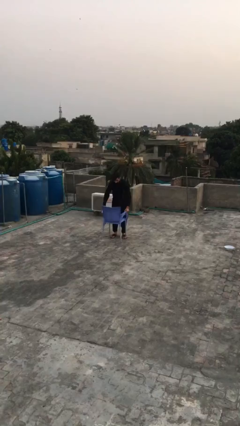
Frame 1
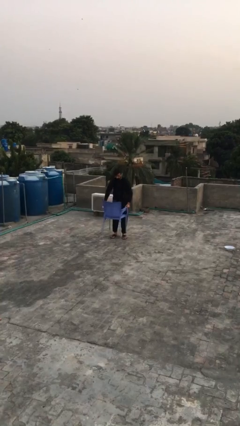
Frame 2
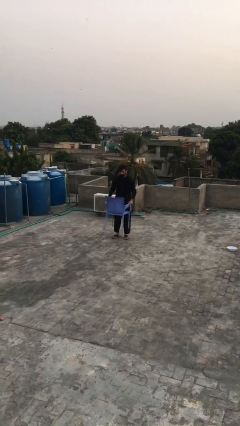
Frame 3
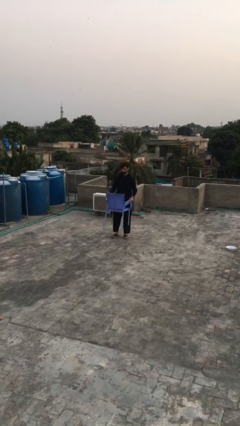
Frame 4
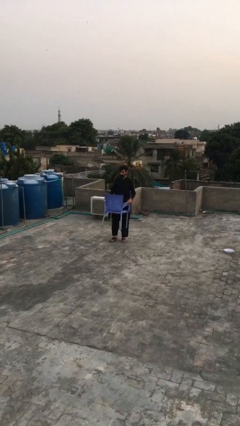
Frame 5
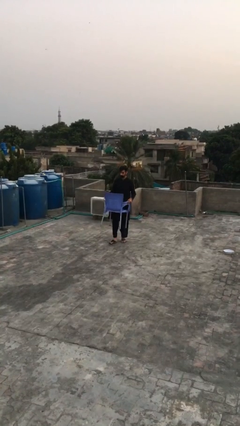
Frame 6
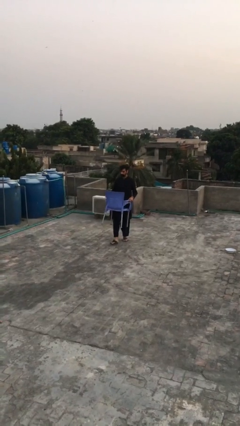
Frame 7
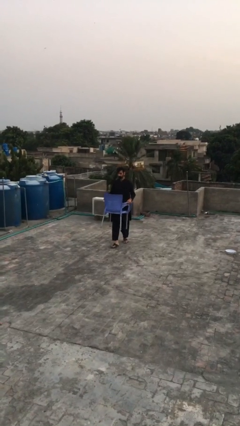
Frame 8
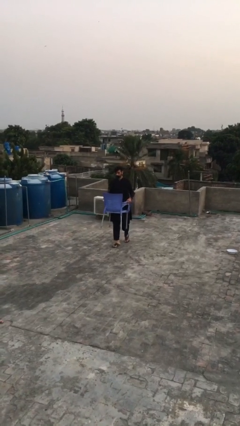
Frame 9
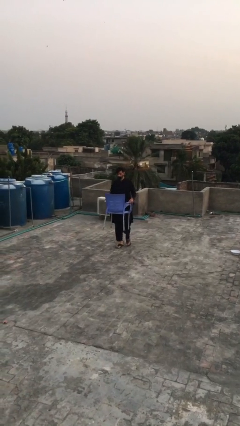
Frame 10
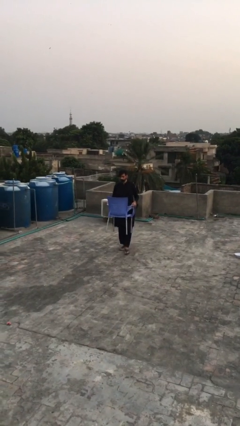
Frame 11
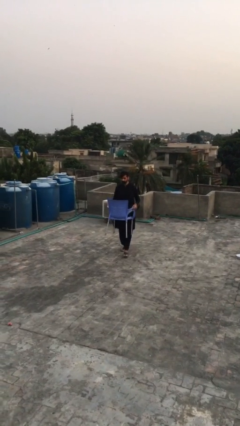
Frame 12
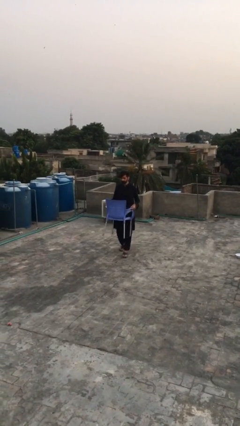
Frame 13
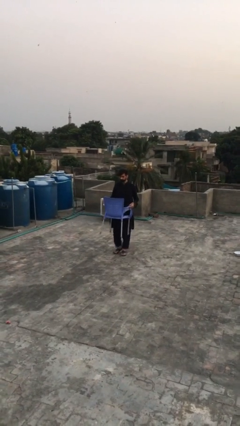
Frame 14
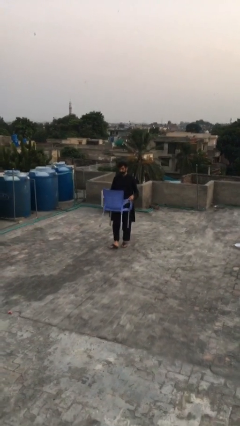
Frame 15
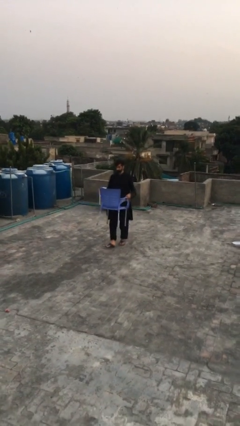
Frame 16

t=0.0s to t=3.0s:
person carries heavy object

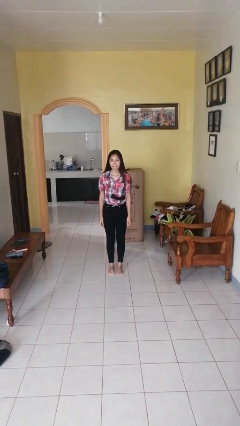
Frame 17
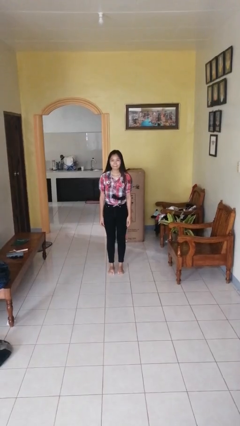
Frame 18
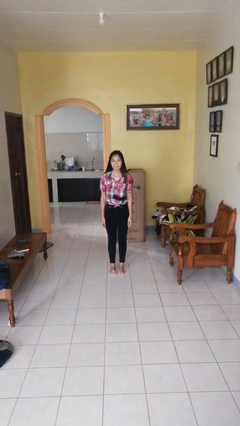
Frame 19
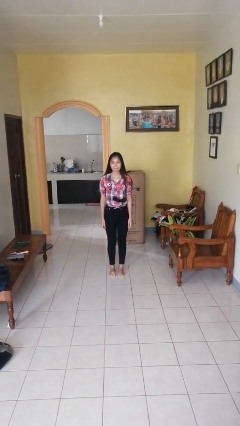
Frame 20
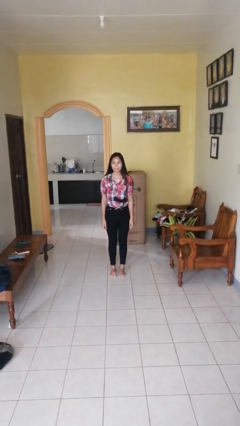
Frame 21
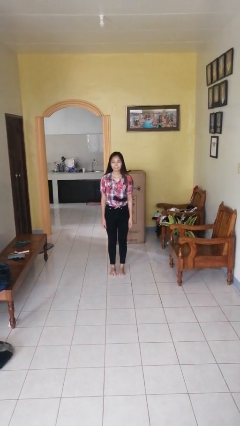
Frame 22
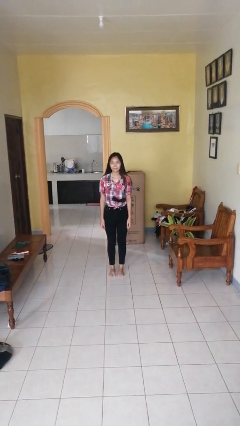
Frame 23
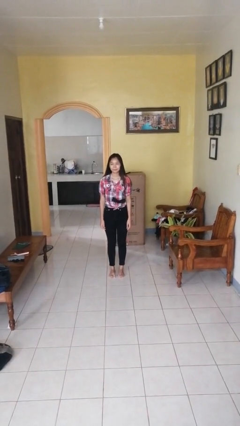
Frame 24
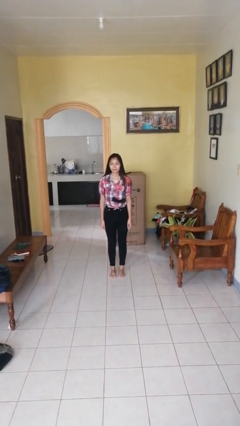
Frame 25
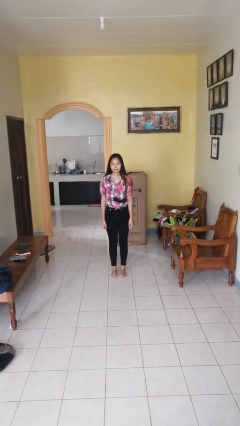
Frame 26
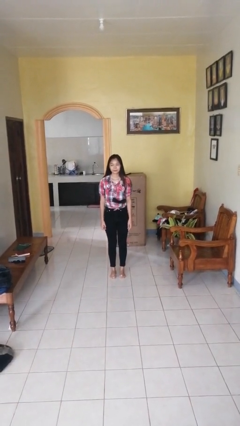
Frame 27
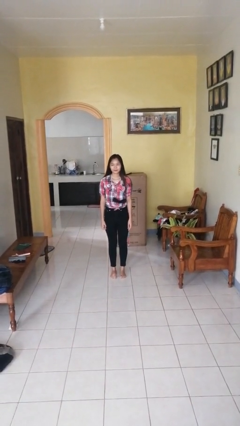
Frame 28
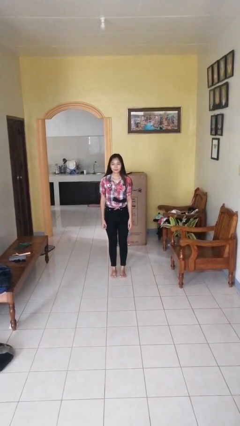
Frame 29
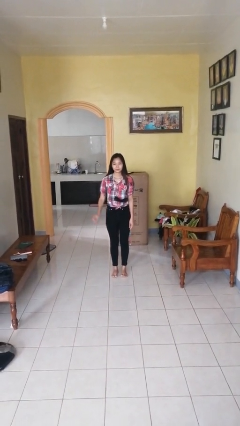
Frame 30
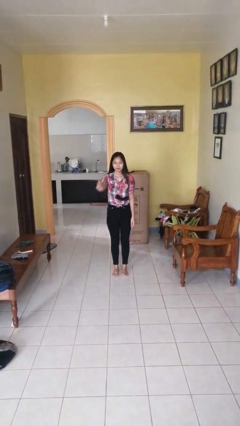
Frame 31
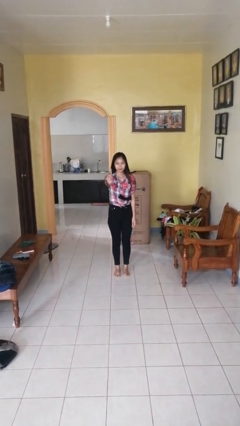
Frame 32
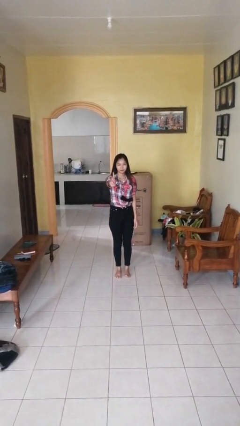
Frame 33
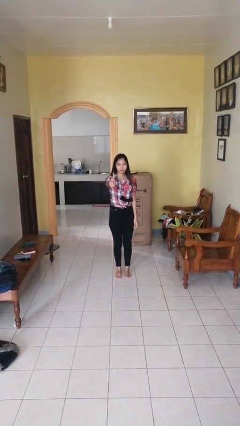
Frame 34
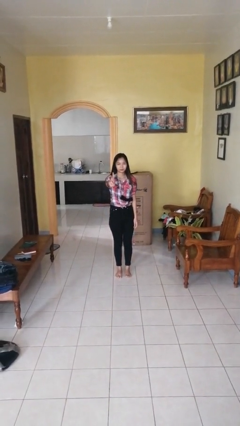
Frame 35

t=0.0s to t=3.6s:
person gestures number one

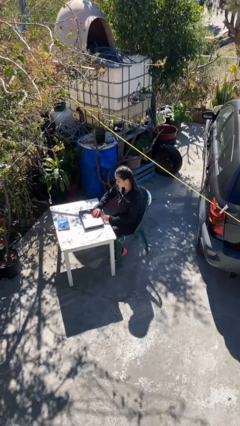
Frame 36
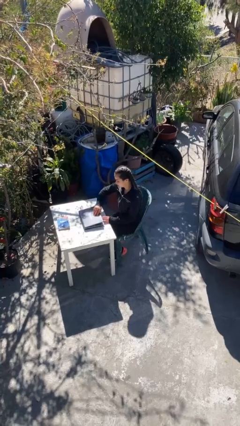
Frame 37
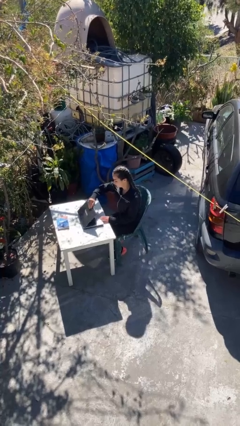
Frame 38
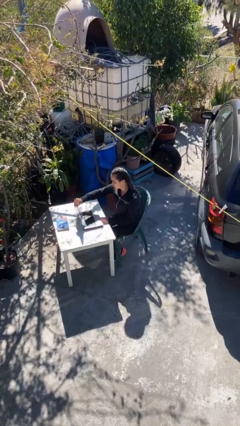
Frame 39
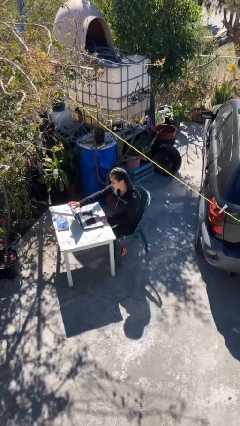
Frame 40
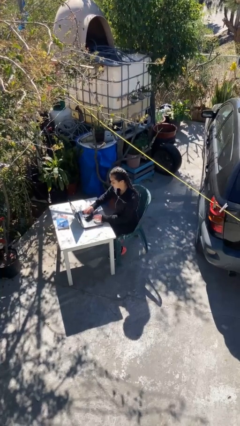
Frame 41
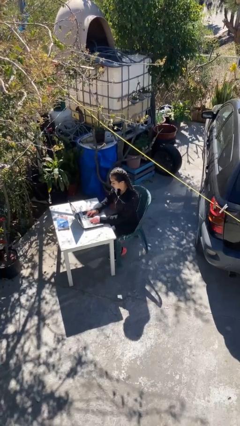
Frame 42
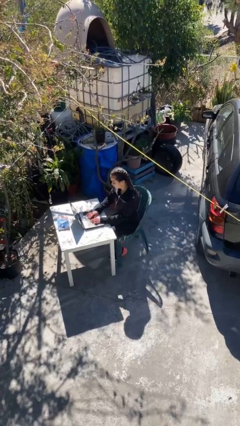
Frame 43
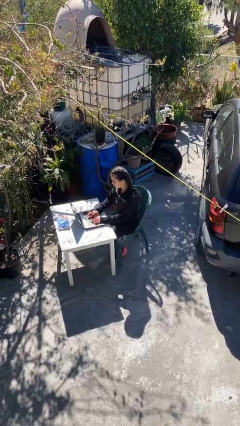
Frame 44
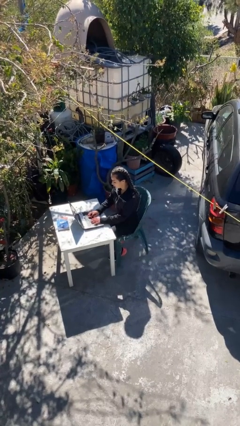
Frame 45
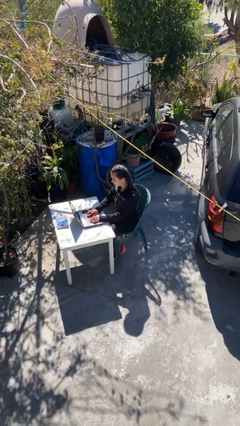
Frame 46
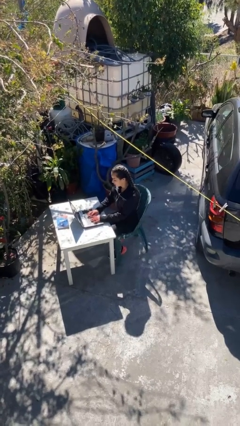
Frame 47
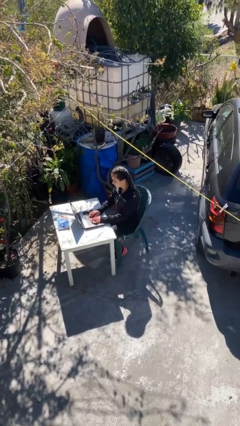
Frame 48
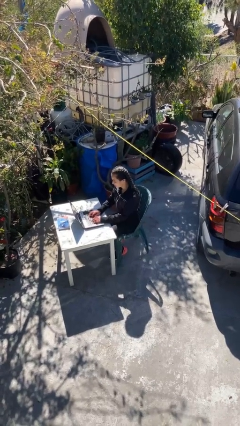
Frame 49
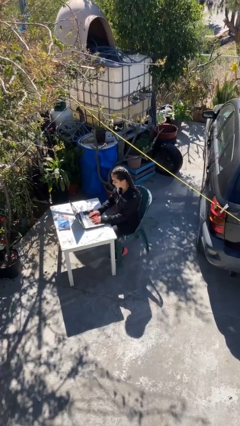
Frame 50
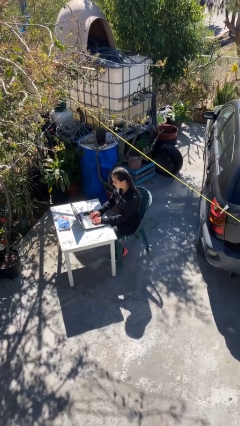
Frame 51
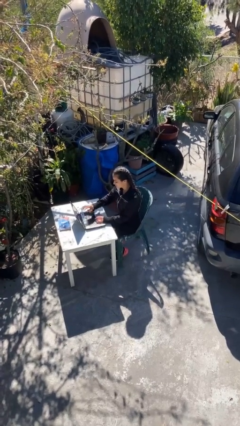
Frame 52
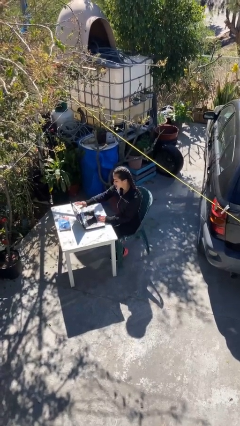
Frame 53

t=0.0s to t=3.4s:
person interacts with laptop

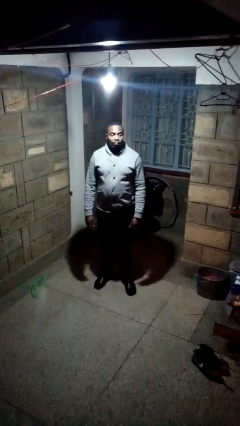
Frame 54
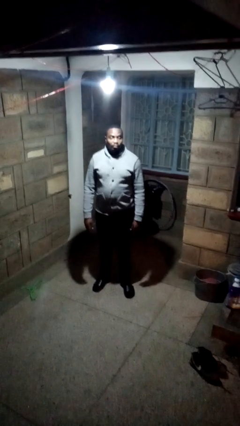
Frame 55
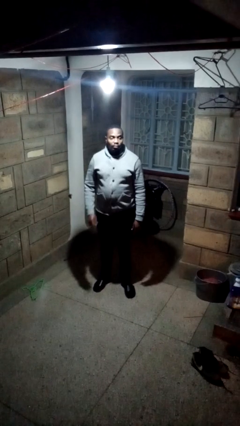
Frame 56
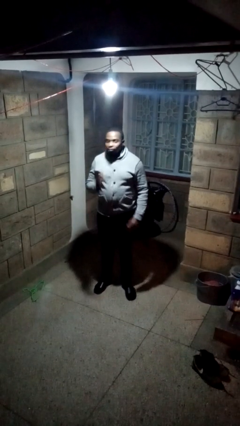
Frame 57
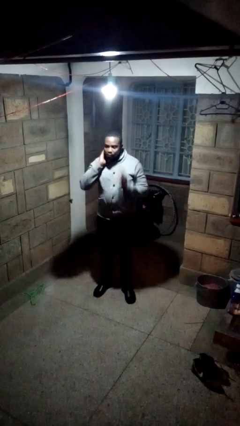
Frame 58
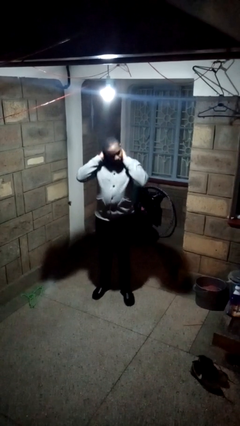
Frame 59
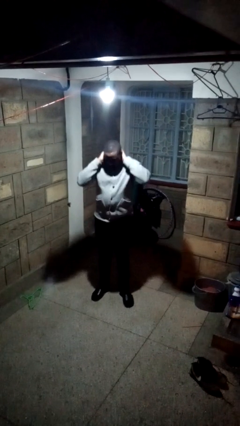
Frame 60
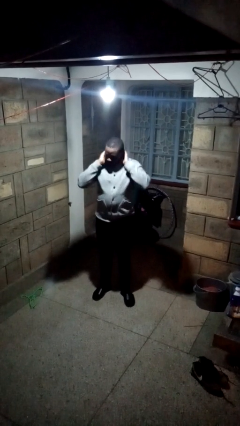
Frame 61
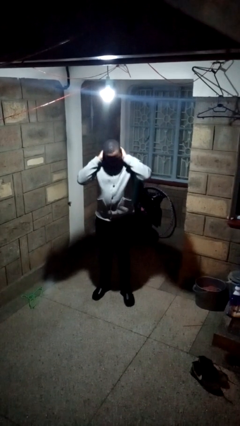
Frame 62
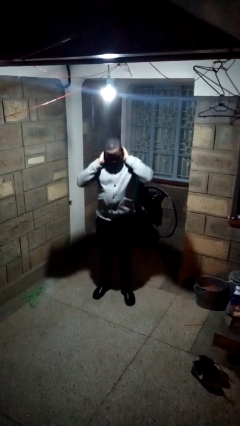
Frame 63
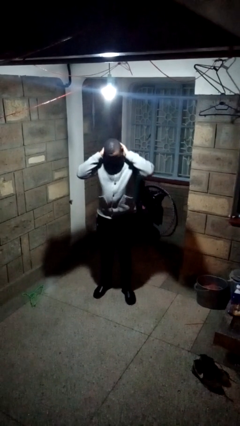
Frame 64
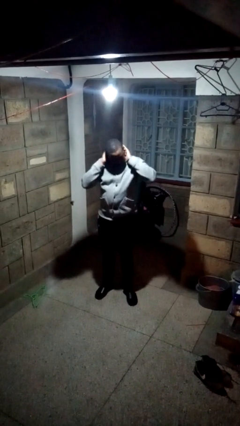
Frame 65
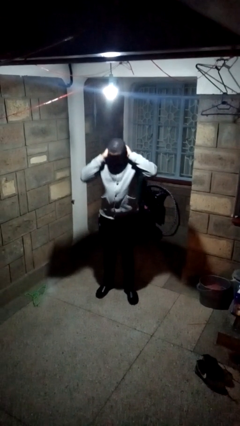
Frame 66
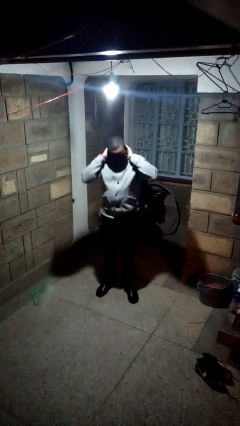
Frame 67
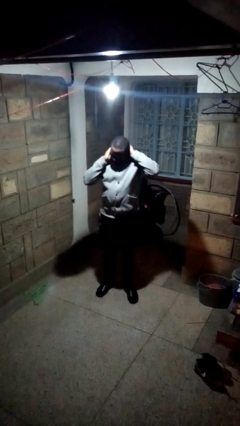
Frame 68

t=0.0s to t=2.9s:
person rubs neck

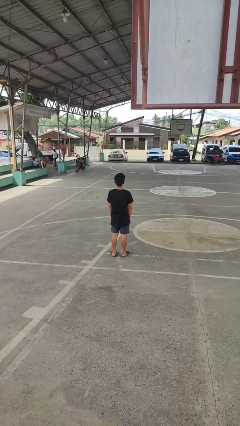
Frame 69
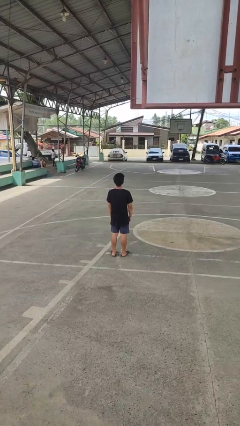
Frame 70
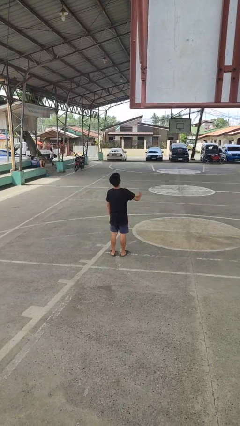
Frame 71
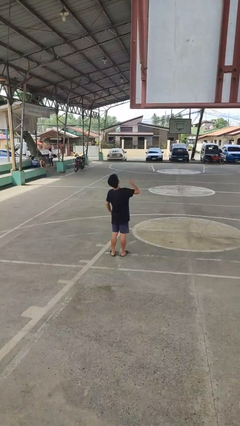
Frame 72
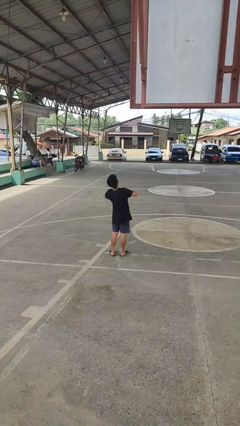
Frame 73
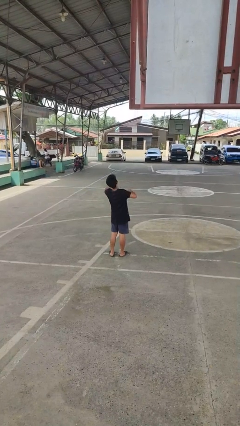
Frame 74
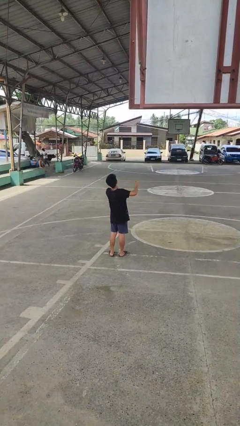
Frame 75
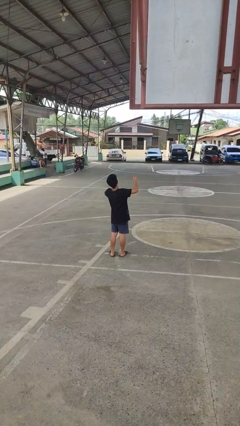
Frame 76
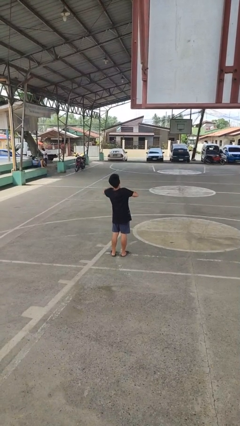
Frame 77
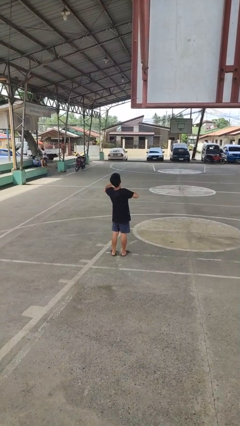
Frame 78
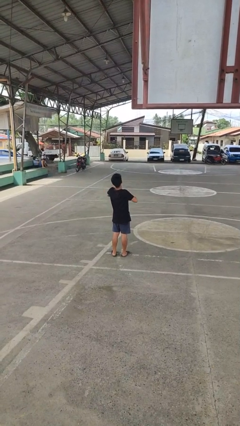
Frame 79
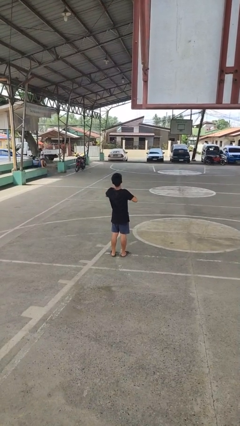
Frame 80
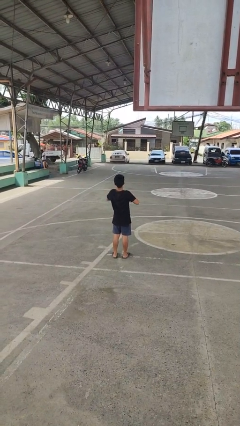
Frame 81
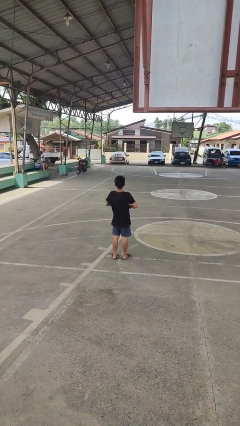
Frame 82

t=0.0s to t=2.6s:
person drums on chest

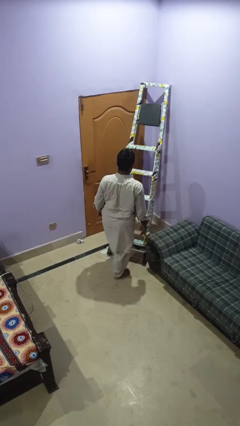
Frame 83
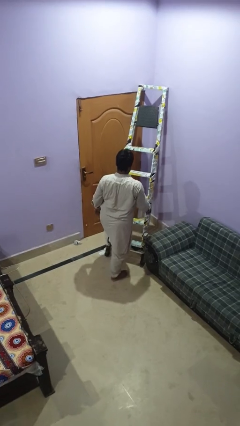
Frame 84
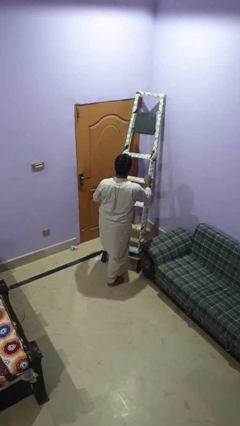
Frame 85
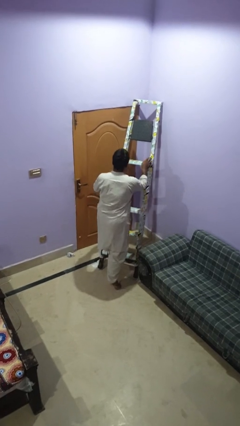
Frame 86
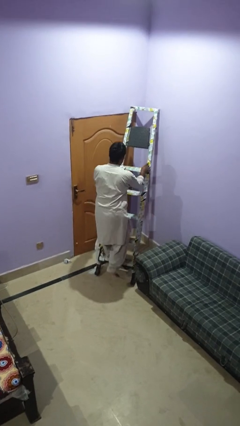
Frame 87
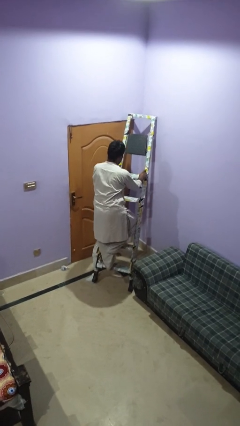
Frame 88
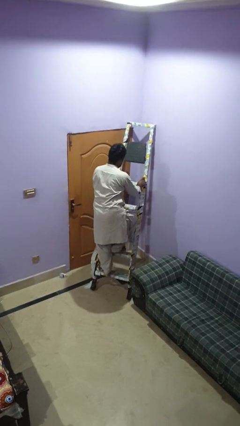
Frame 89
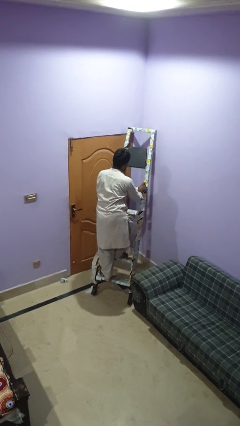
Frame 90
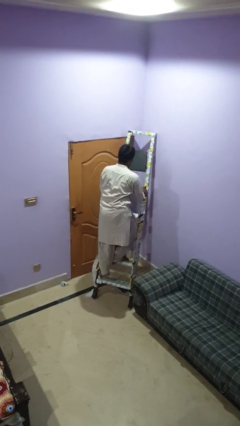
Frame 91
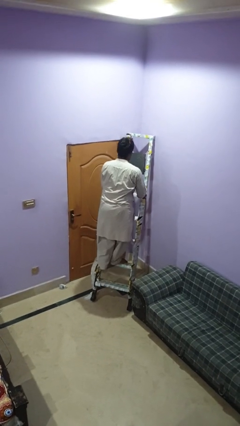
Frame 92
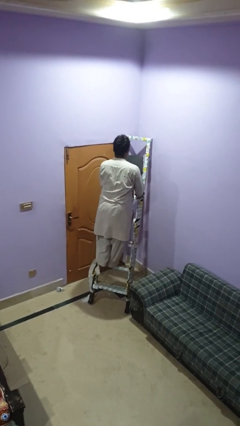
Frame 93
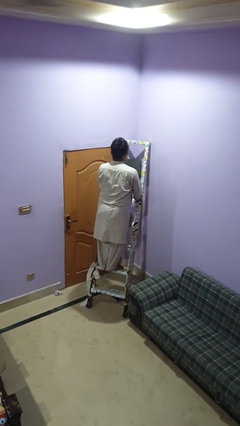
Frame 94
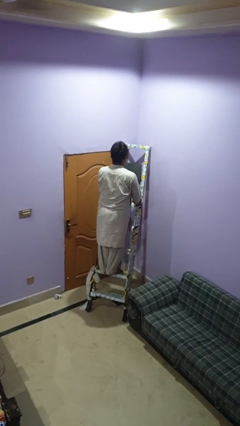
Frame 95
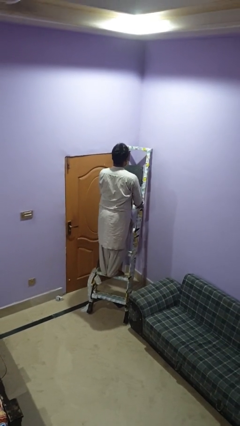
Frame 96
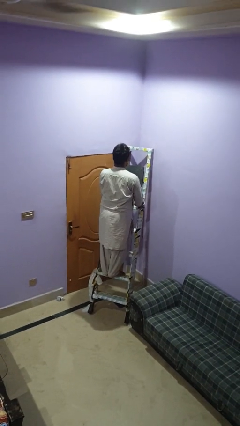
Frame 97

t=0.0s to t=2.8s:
person climbs up ladder
